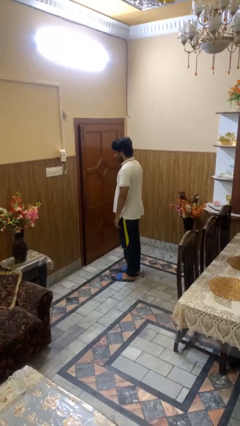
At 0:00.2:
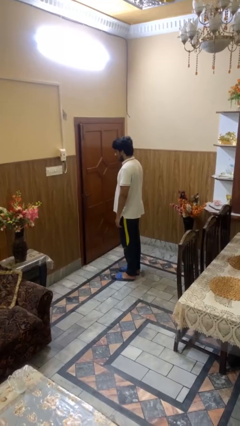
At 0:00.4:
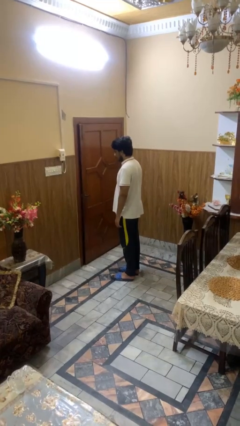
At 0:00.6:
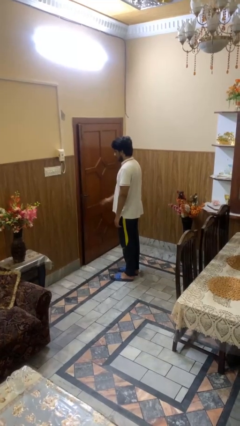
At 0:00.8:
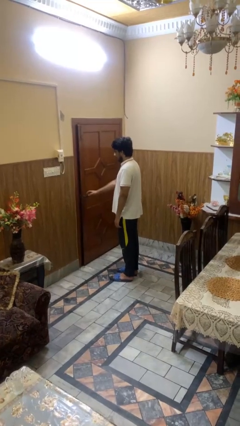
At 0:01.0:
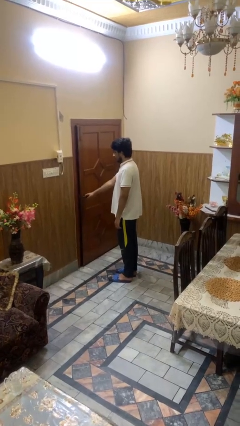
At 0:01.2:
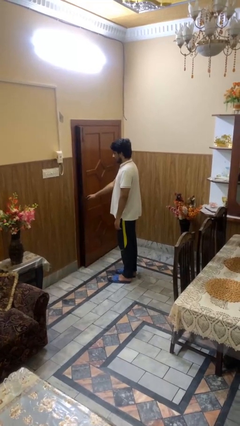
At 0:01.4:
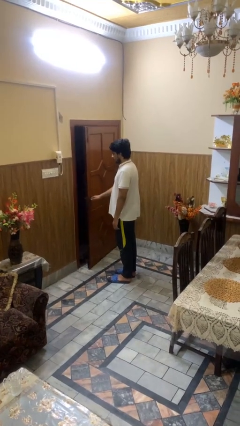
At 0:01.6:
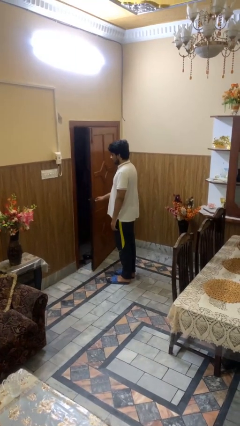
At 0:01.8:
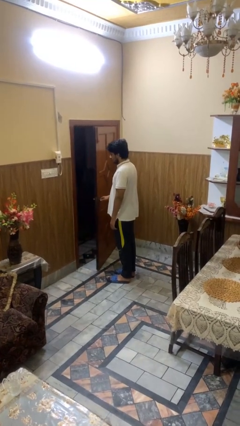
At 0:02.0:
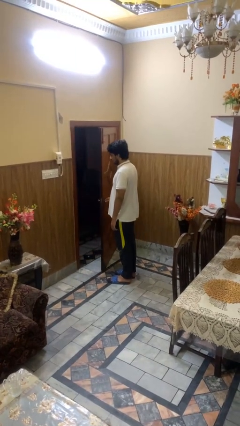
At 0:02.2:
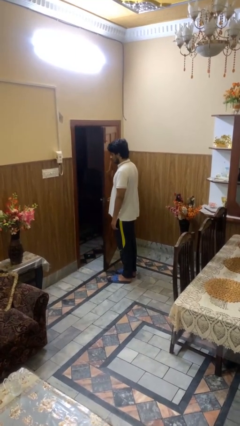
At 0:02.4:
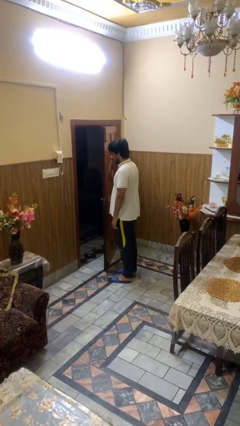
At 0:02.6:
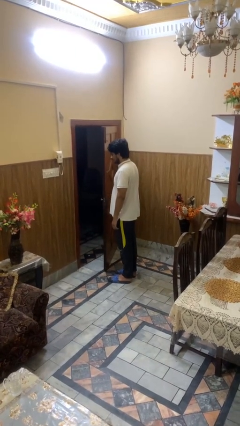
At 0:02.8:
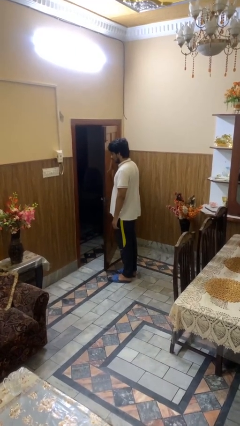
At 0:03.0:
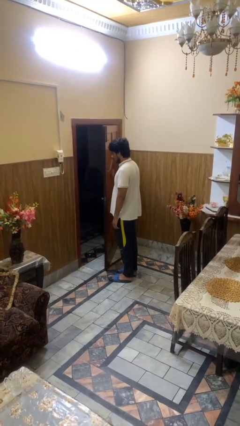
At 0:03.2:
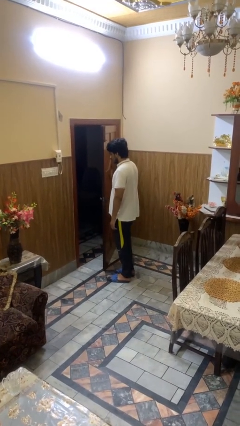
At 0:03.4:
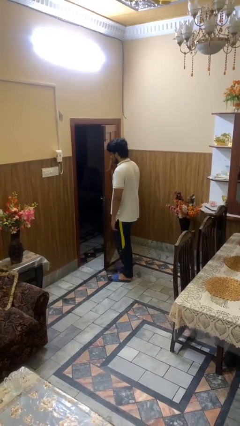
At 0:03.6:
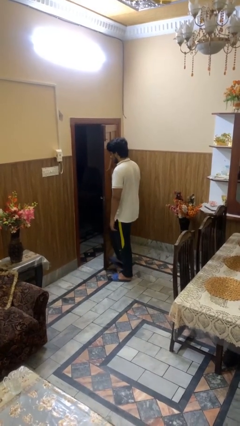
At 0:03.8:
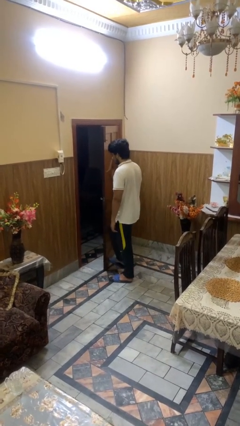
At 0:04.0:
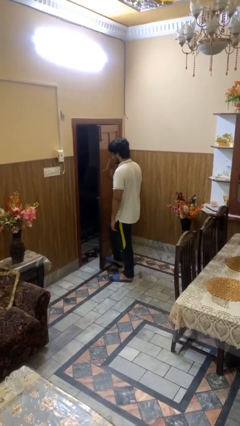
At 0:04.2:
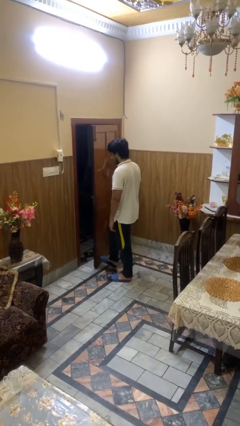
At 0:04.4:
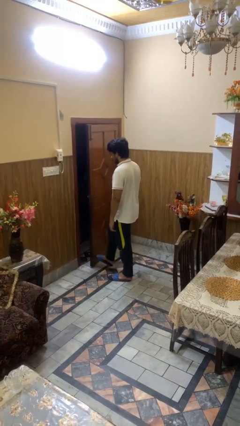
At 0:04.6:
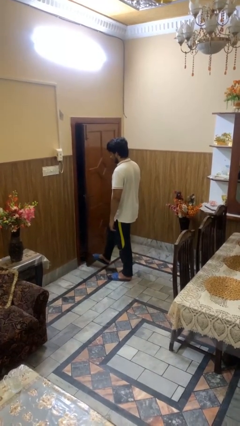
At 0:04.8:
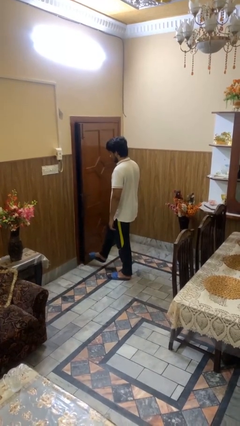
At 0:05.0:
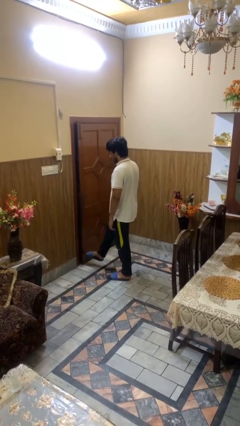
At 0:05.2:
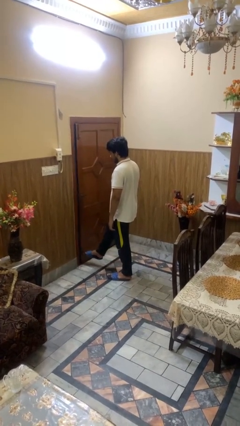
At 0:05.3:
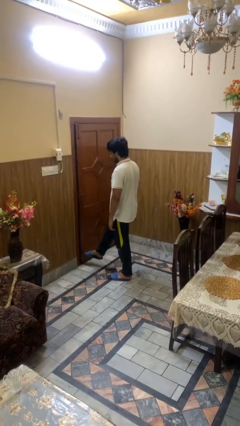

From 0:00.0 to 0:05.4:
person opens facility door

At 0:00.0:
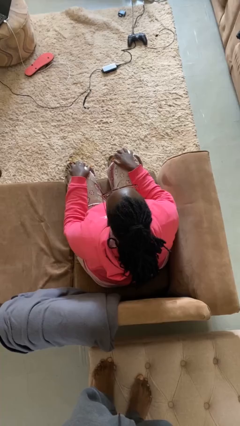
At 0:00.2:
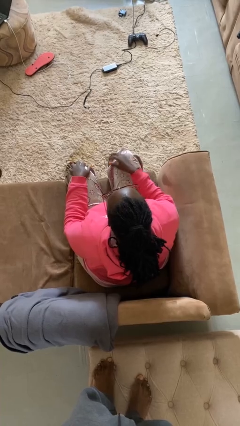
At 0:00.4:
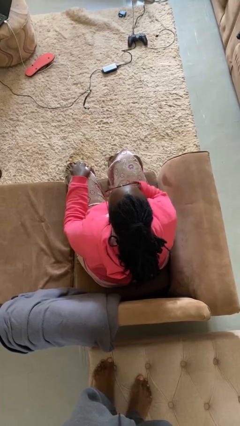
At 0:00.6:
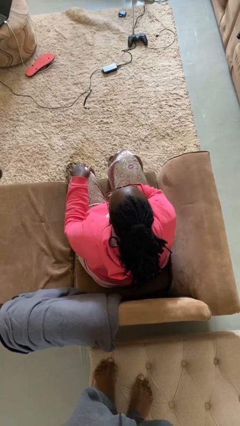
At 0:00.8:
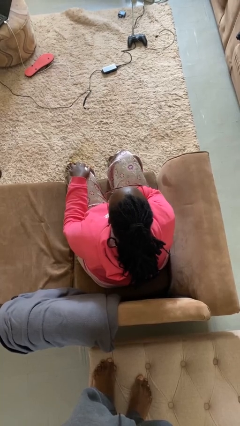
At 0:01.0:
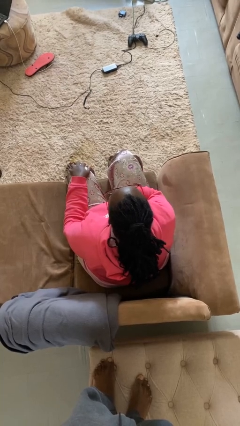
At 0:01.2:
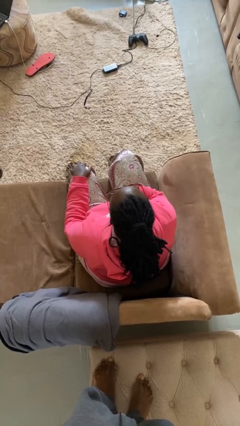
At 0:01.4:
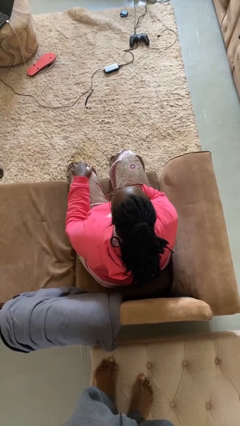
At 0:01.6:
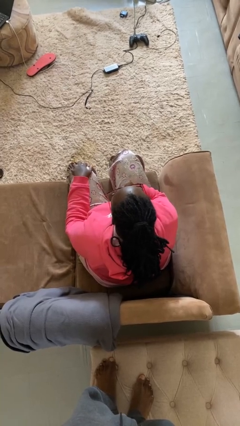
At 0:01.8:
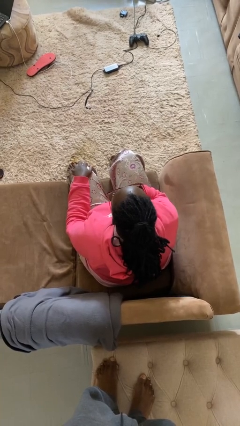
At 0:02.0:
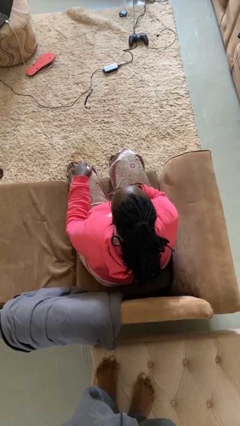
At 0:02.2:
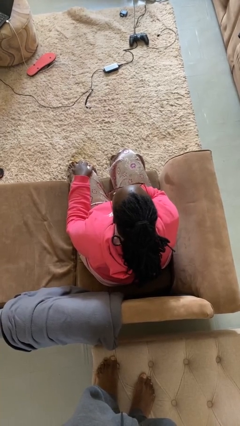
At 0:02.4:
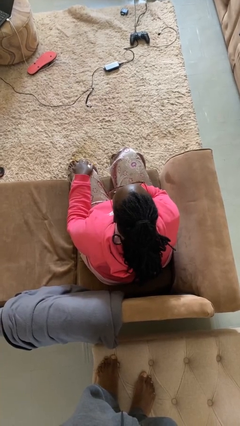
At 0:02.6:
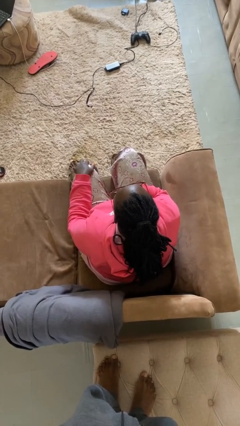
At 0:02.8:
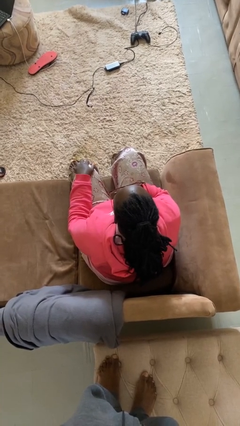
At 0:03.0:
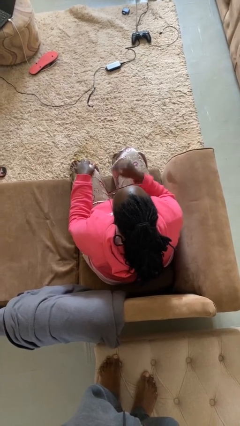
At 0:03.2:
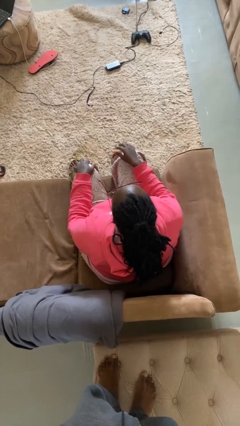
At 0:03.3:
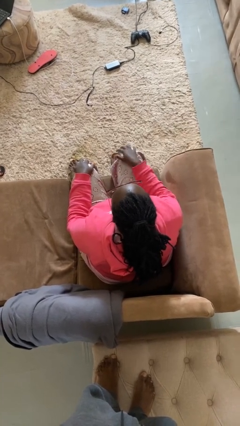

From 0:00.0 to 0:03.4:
person strokes chin

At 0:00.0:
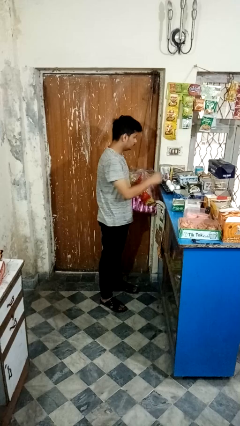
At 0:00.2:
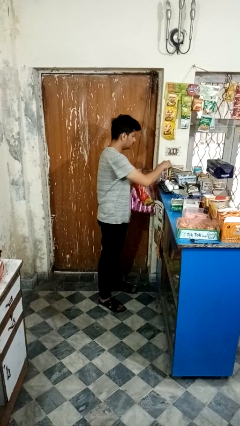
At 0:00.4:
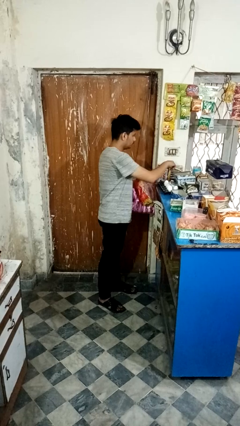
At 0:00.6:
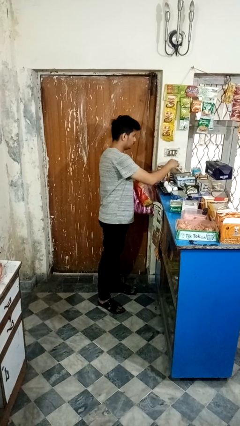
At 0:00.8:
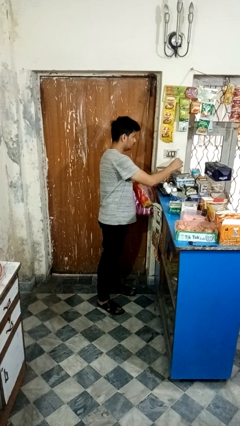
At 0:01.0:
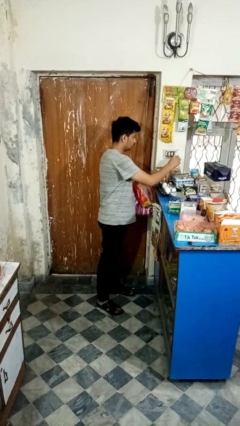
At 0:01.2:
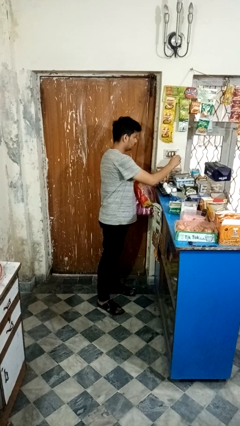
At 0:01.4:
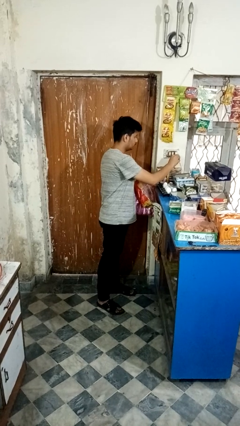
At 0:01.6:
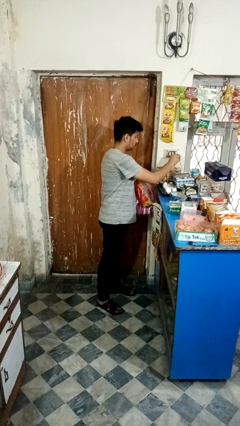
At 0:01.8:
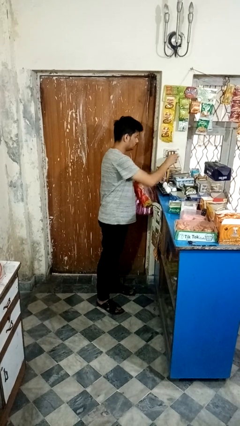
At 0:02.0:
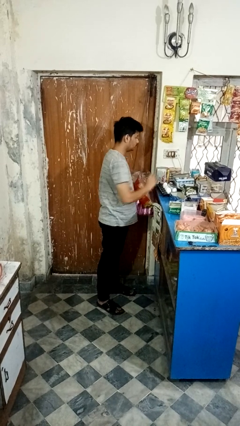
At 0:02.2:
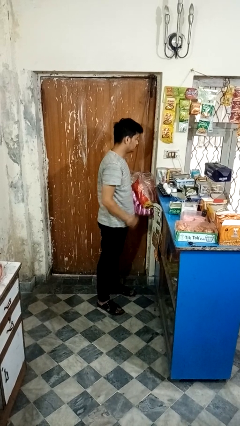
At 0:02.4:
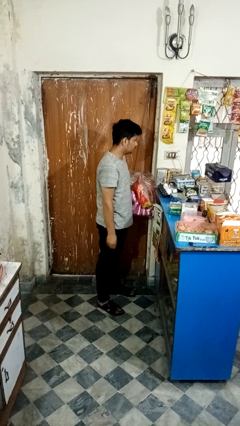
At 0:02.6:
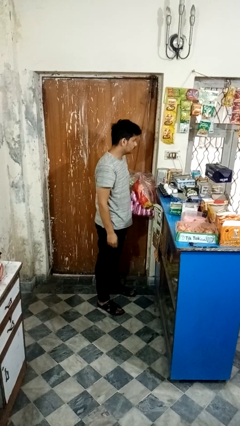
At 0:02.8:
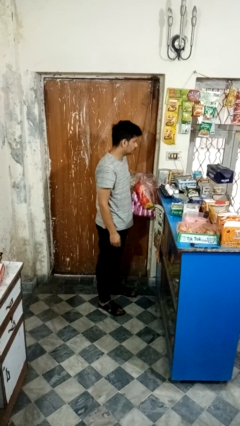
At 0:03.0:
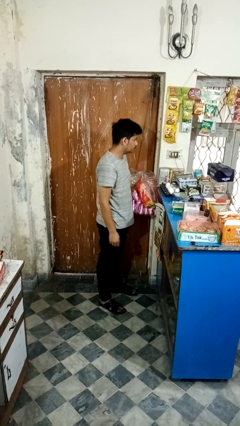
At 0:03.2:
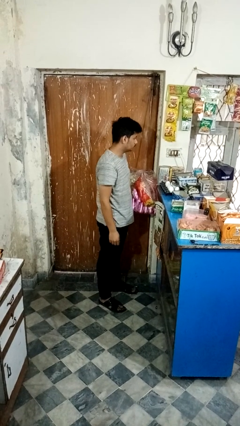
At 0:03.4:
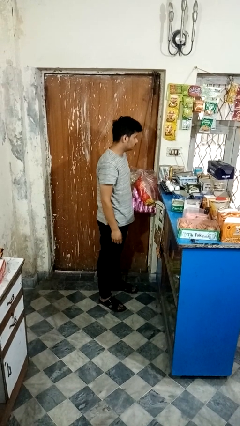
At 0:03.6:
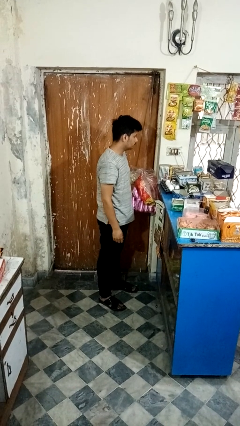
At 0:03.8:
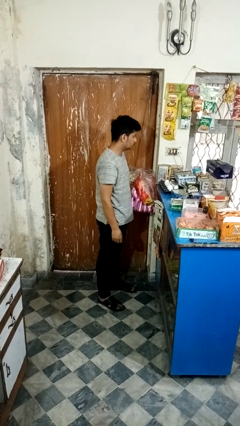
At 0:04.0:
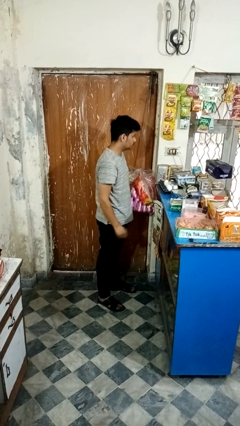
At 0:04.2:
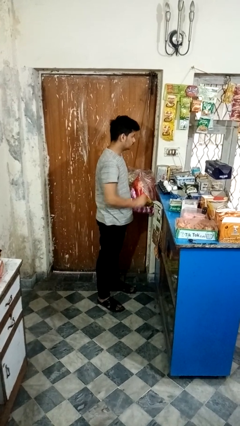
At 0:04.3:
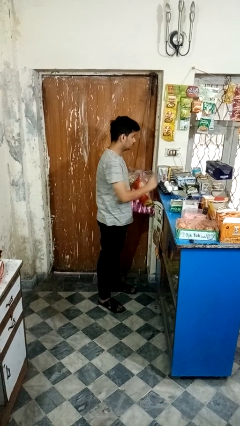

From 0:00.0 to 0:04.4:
person plugs into electrical socket

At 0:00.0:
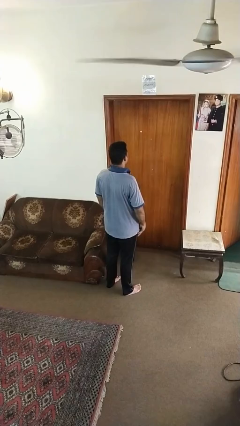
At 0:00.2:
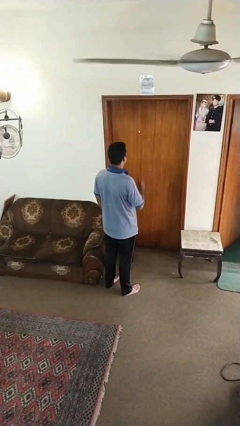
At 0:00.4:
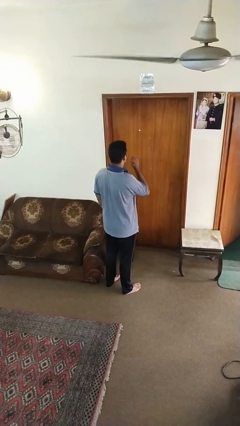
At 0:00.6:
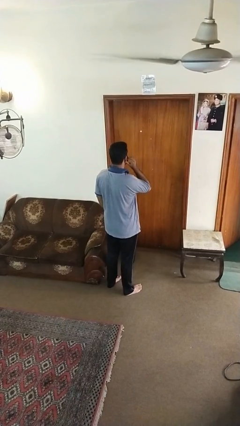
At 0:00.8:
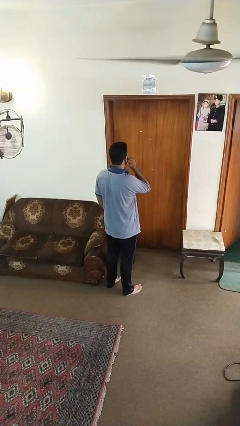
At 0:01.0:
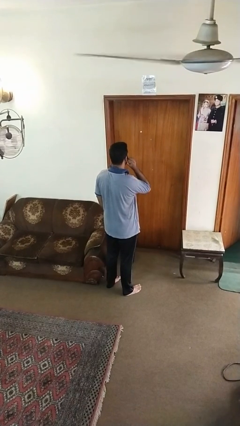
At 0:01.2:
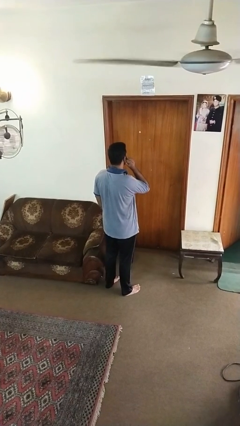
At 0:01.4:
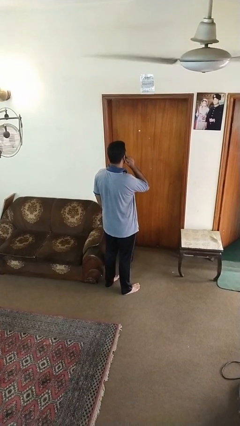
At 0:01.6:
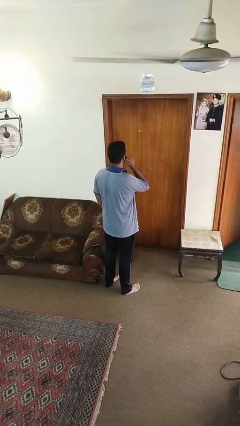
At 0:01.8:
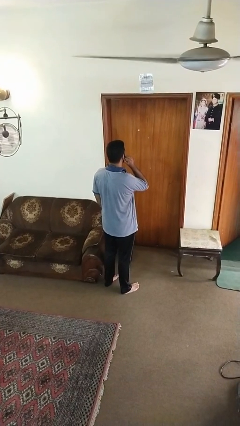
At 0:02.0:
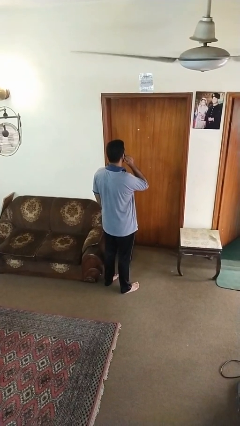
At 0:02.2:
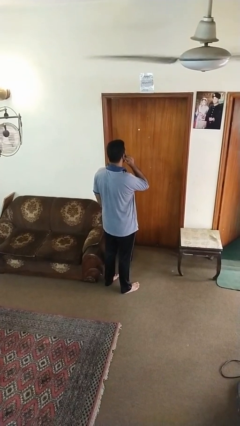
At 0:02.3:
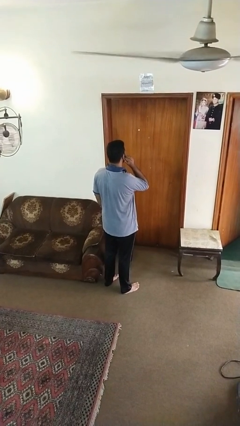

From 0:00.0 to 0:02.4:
person touches earlobe

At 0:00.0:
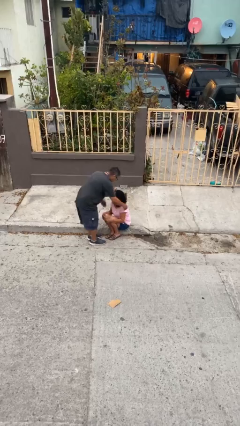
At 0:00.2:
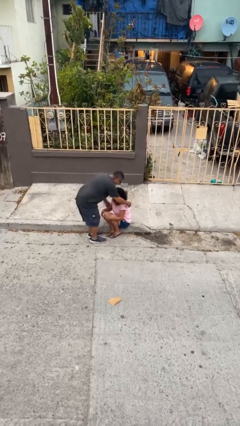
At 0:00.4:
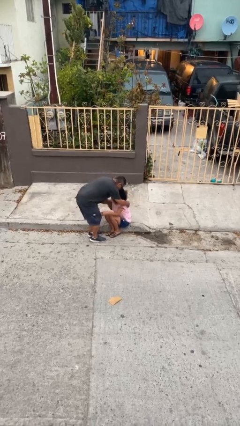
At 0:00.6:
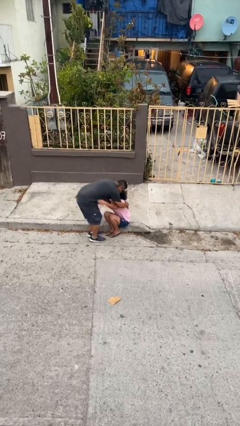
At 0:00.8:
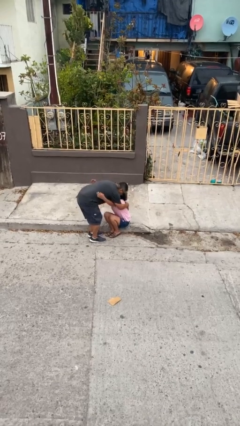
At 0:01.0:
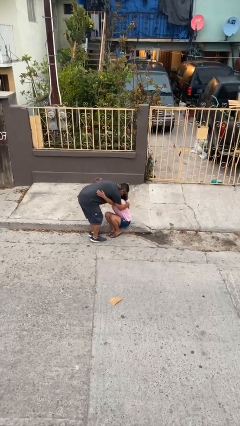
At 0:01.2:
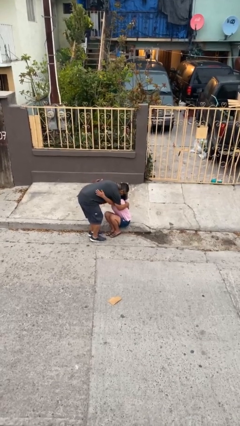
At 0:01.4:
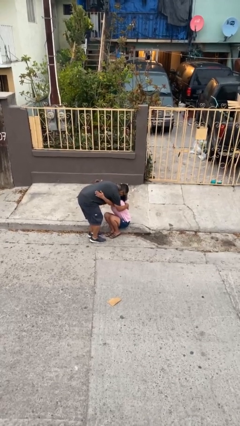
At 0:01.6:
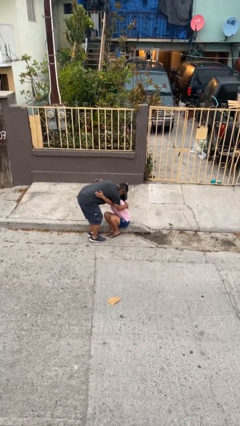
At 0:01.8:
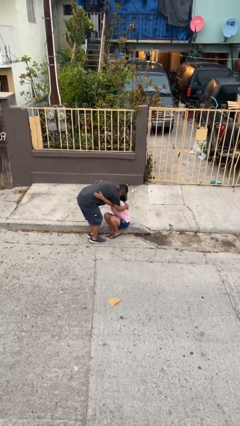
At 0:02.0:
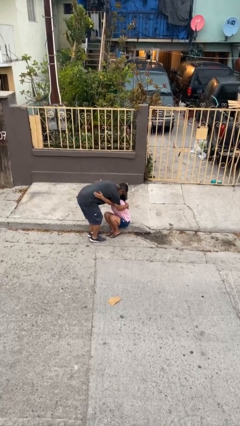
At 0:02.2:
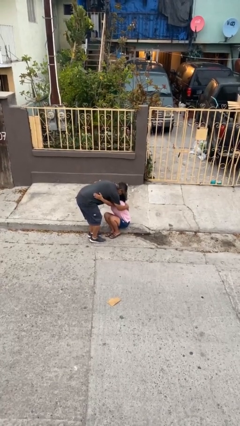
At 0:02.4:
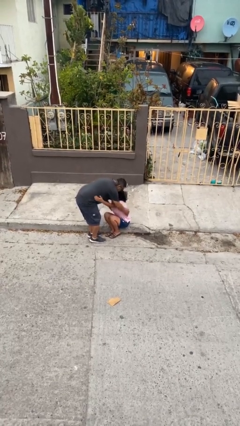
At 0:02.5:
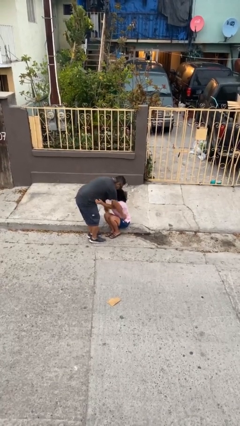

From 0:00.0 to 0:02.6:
person embraces person
